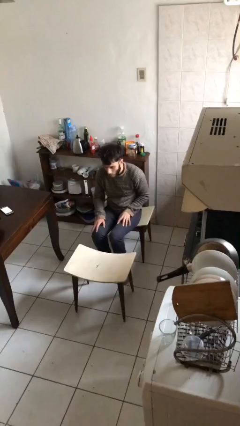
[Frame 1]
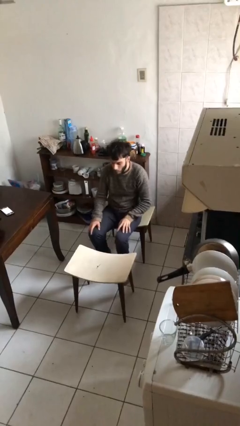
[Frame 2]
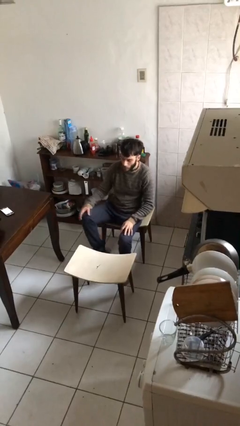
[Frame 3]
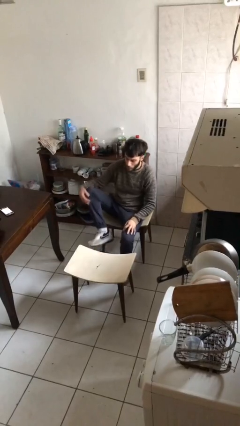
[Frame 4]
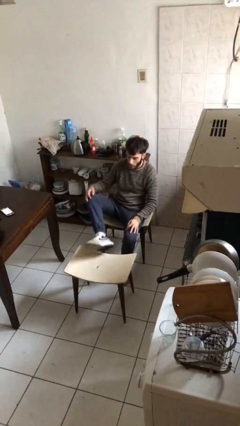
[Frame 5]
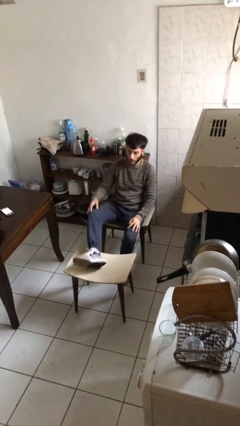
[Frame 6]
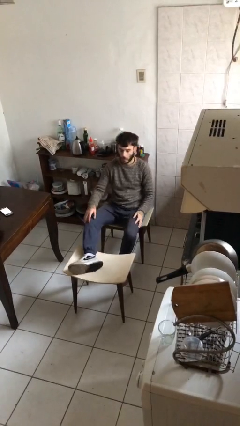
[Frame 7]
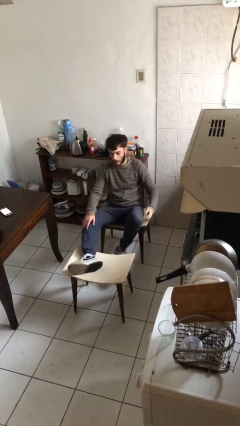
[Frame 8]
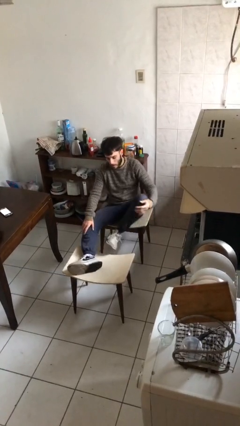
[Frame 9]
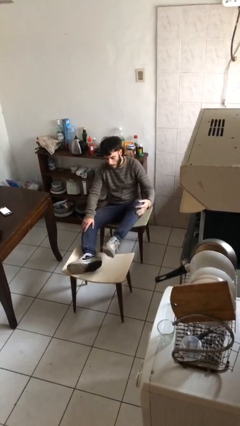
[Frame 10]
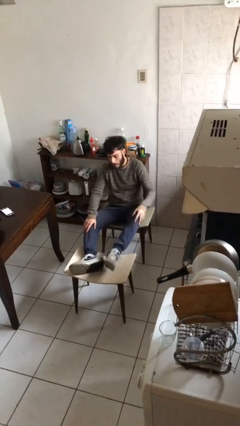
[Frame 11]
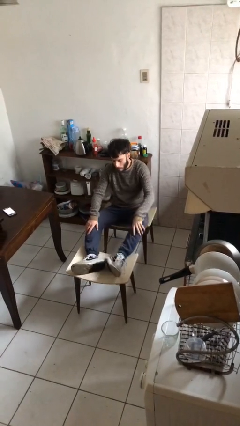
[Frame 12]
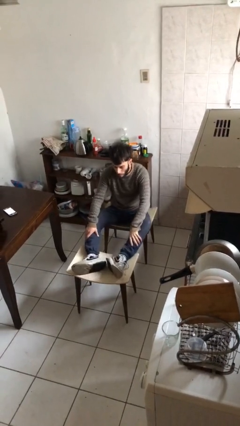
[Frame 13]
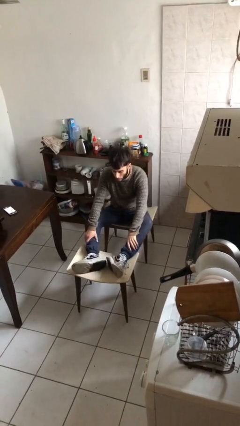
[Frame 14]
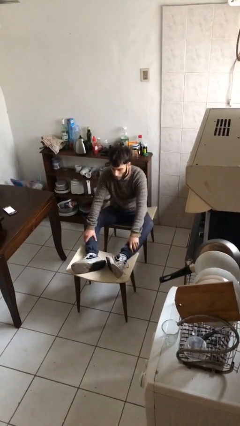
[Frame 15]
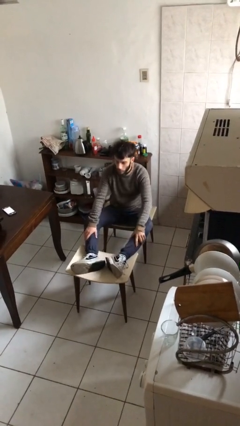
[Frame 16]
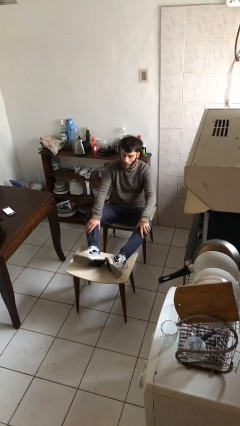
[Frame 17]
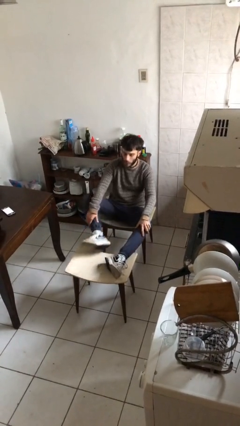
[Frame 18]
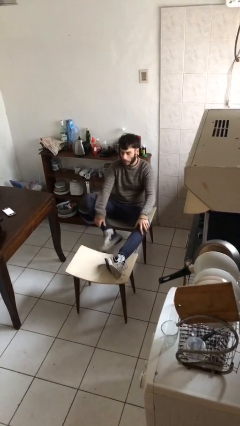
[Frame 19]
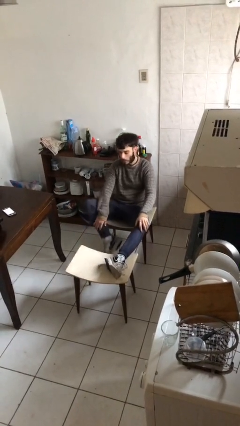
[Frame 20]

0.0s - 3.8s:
person puts feet up

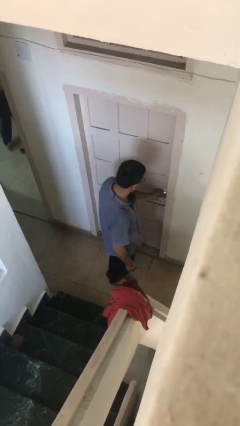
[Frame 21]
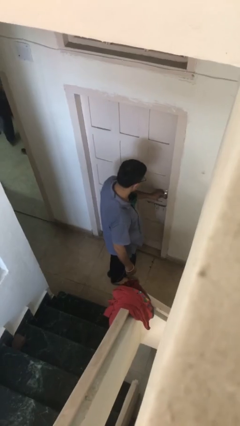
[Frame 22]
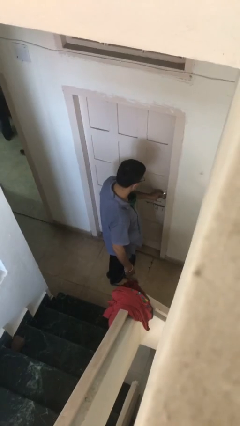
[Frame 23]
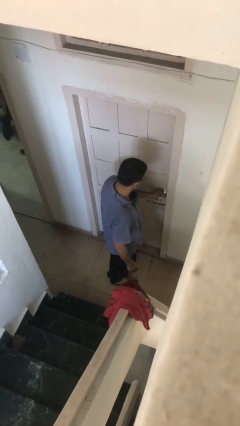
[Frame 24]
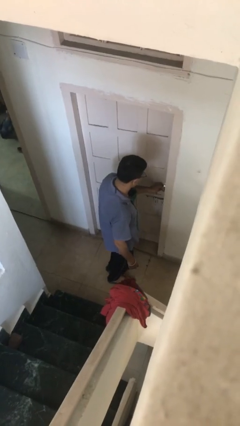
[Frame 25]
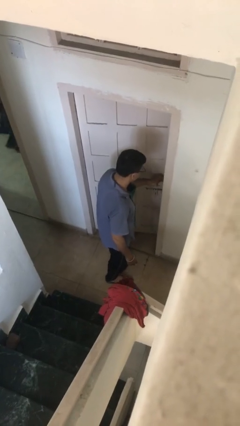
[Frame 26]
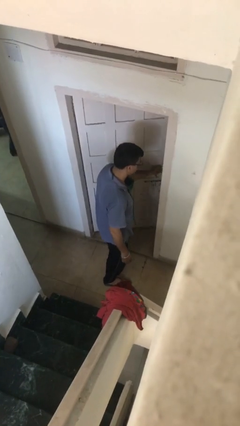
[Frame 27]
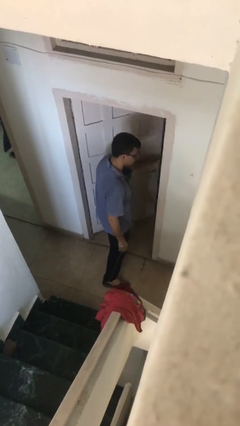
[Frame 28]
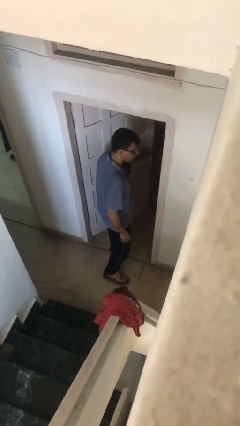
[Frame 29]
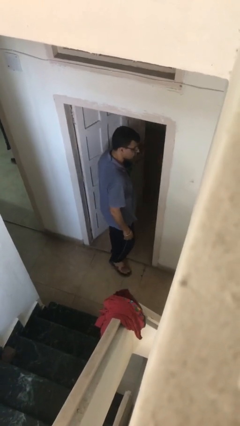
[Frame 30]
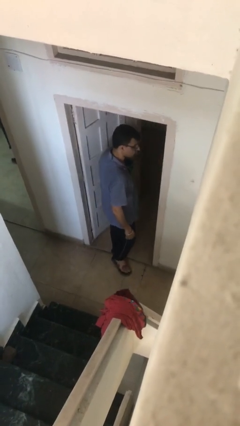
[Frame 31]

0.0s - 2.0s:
person opens facility door

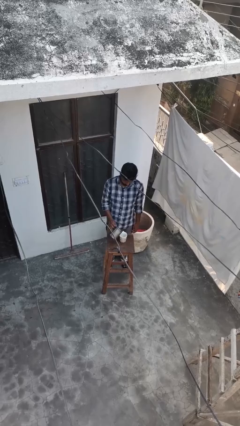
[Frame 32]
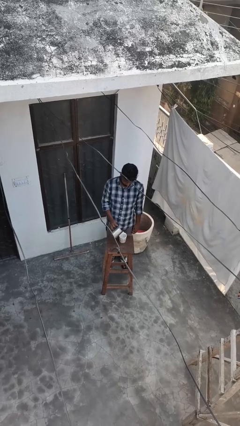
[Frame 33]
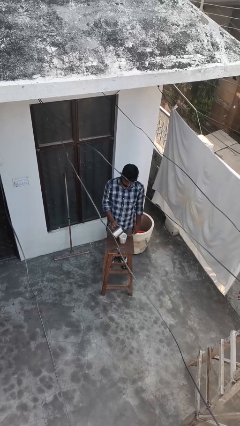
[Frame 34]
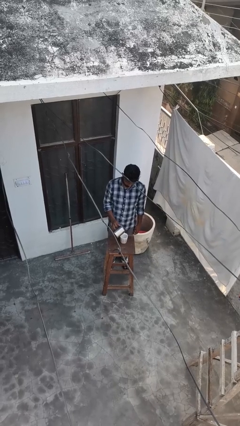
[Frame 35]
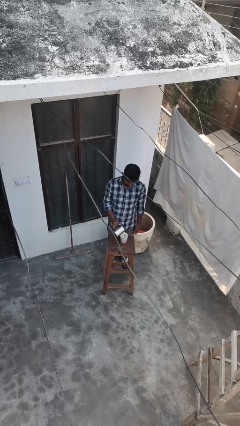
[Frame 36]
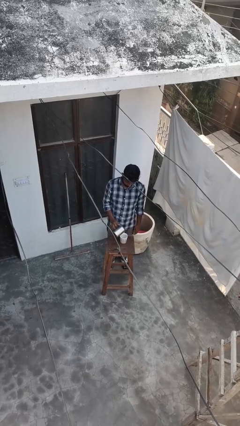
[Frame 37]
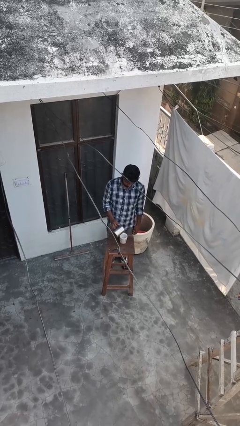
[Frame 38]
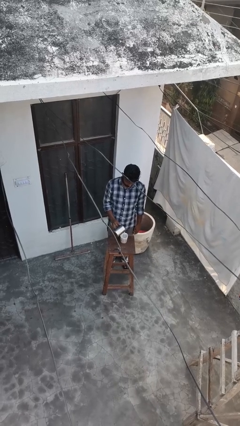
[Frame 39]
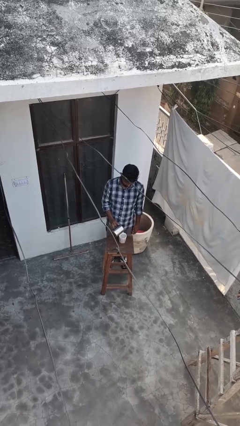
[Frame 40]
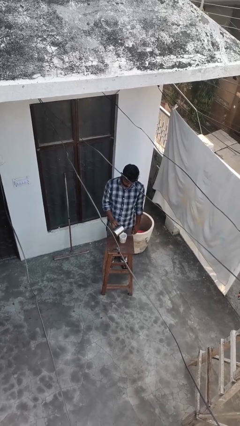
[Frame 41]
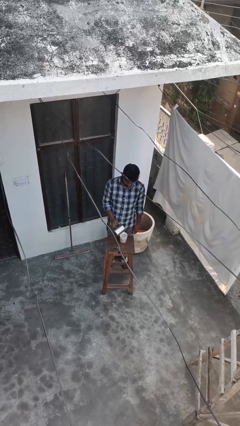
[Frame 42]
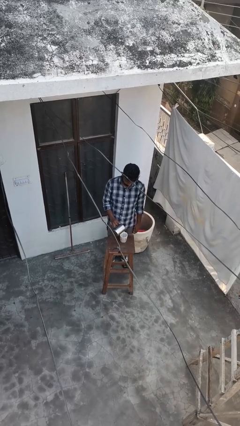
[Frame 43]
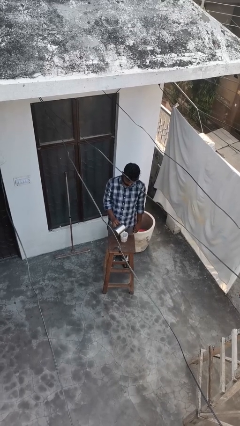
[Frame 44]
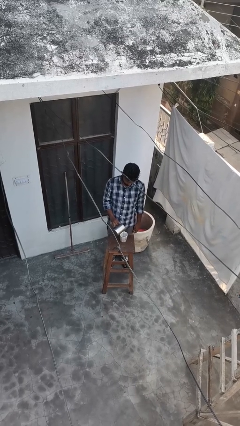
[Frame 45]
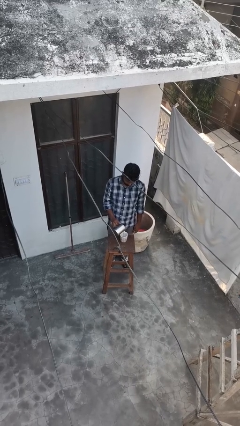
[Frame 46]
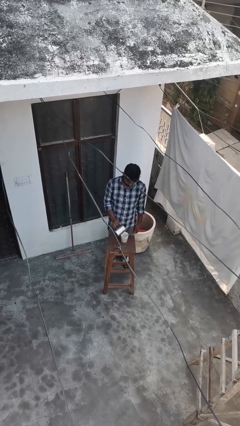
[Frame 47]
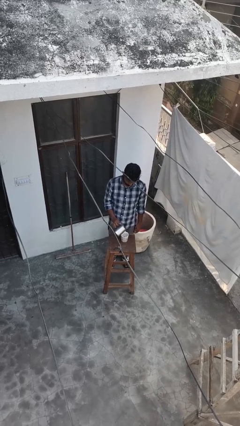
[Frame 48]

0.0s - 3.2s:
person pours coffee into mug

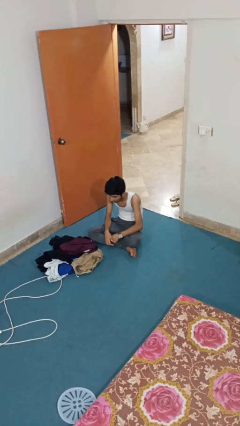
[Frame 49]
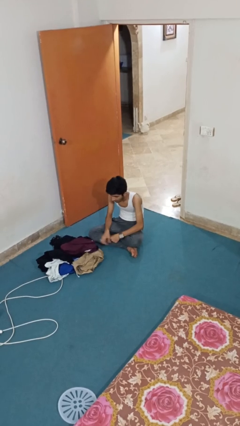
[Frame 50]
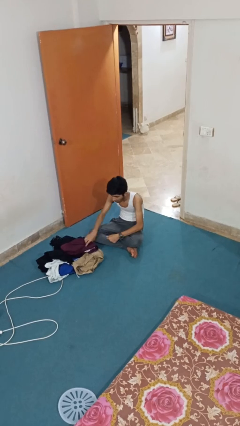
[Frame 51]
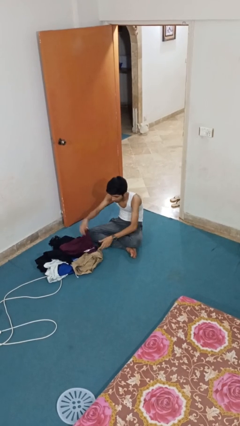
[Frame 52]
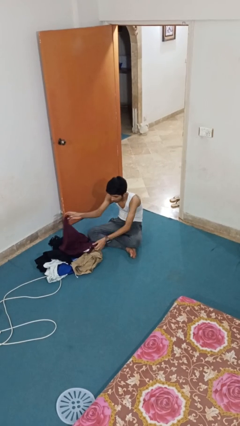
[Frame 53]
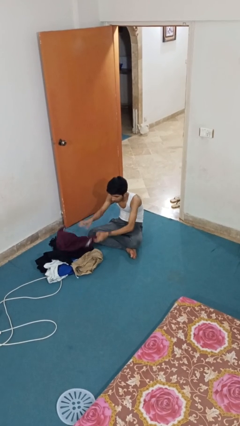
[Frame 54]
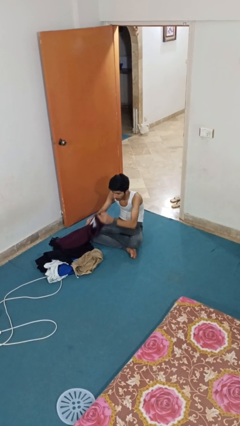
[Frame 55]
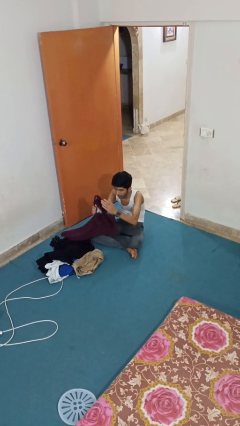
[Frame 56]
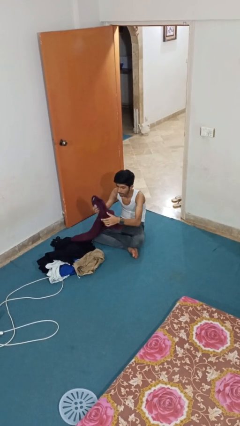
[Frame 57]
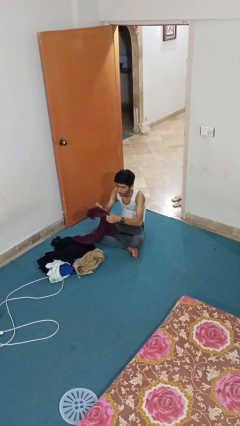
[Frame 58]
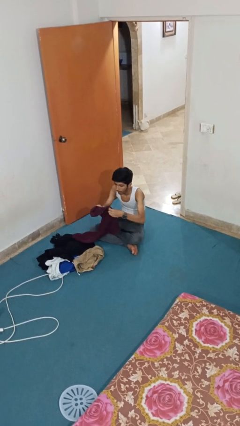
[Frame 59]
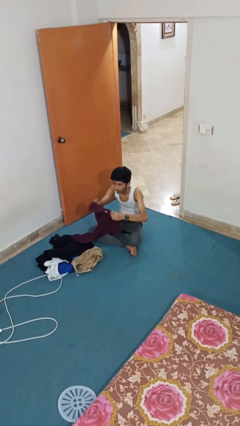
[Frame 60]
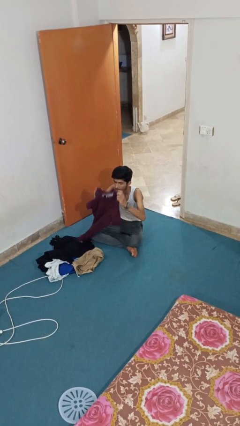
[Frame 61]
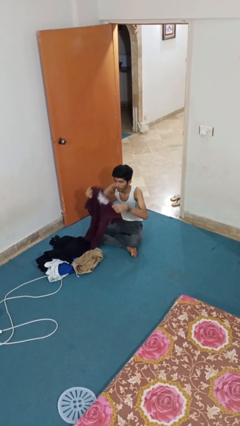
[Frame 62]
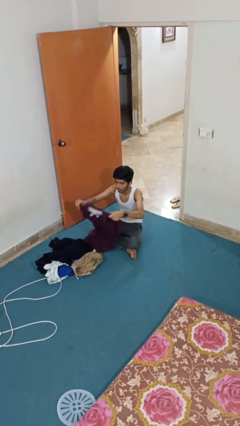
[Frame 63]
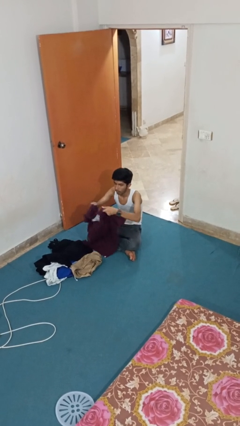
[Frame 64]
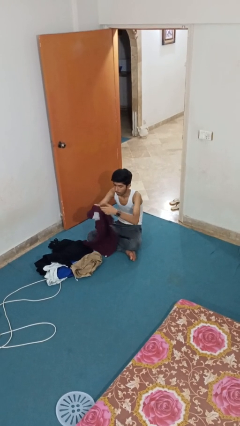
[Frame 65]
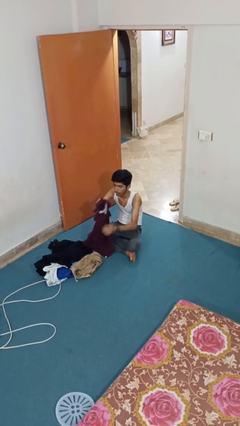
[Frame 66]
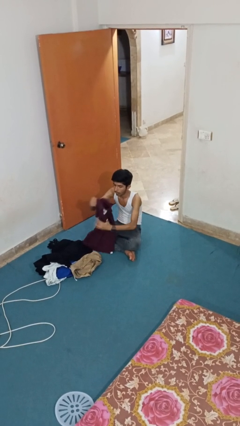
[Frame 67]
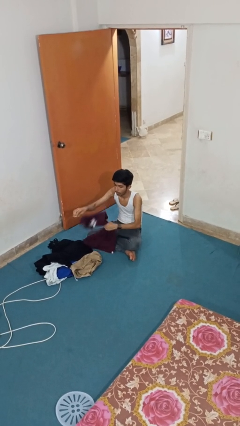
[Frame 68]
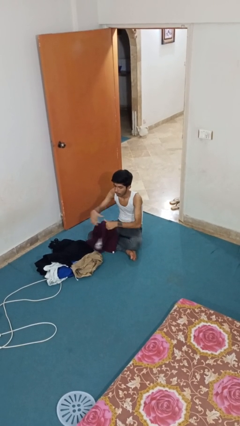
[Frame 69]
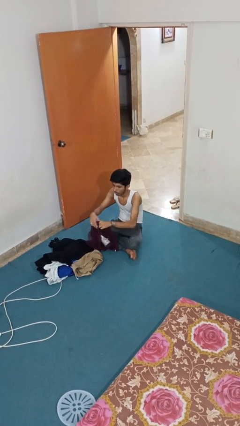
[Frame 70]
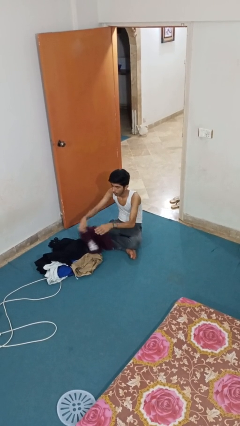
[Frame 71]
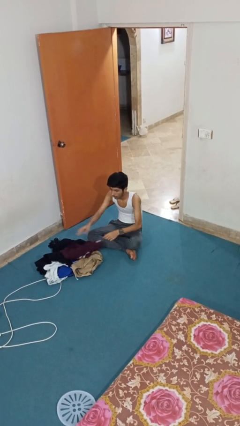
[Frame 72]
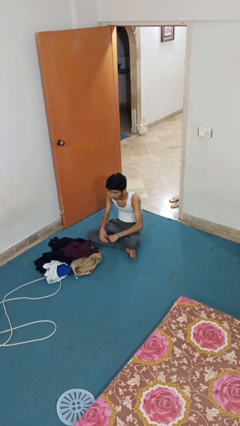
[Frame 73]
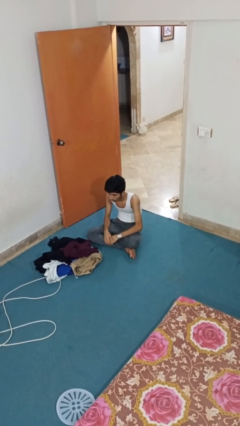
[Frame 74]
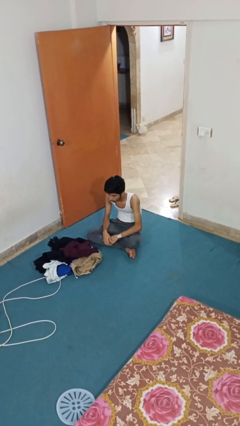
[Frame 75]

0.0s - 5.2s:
person folds shirt

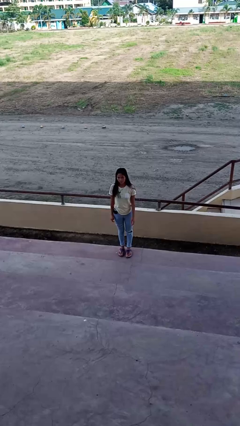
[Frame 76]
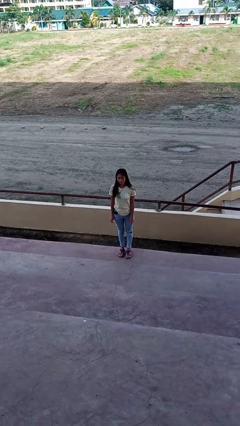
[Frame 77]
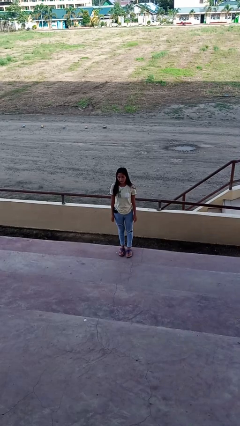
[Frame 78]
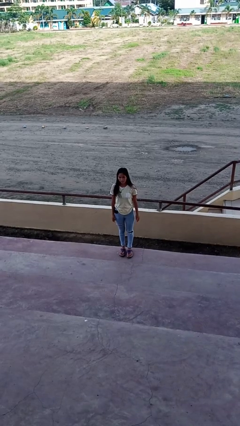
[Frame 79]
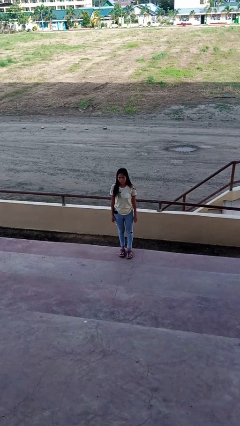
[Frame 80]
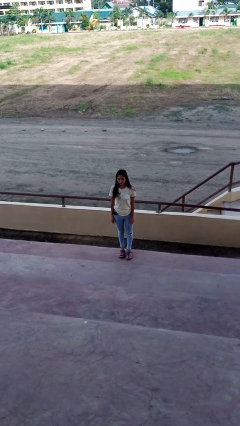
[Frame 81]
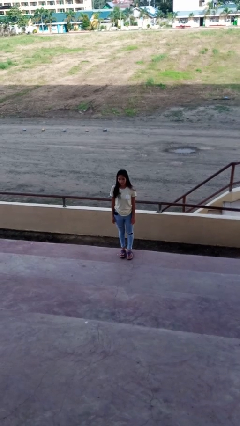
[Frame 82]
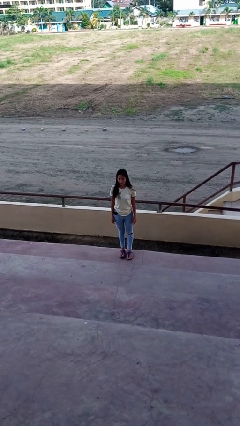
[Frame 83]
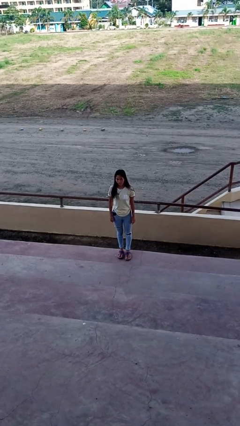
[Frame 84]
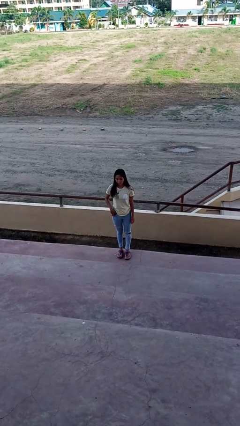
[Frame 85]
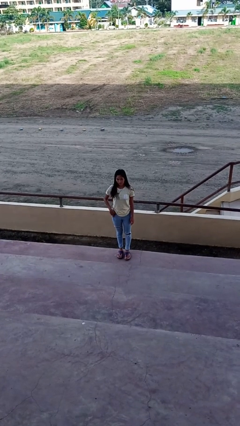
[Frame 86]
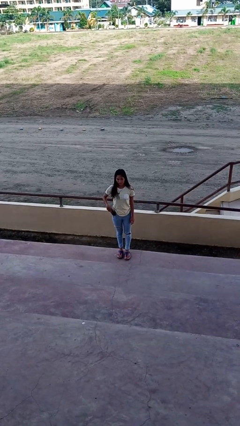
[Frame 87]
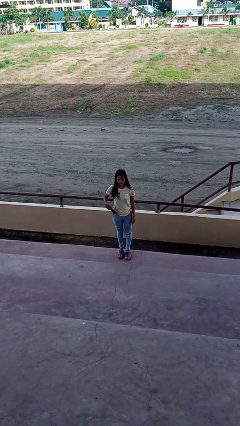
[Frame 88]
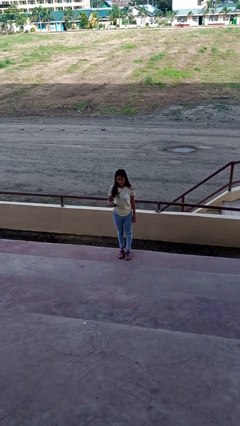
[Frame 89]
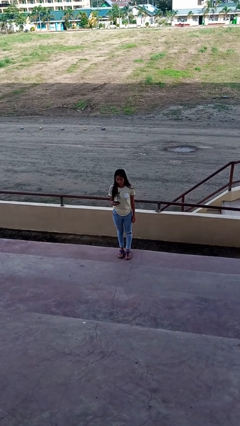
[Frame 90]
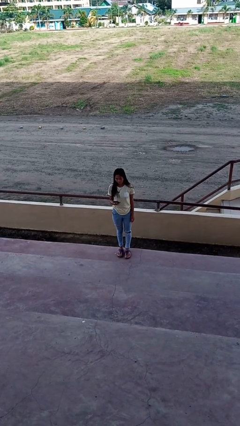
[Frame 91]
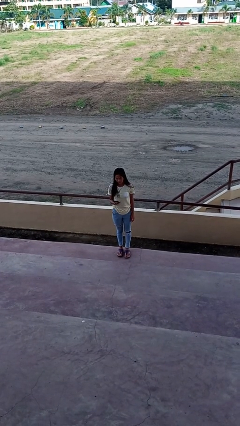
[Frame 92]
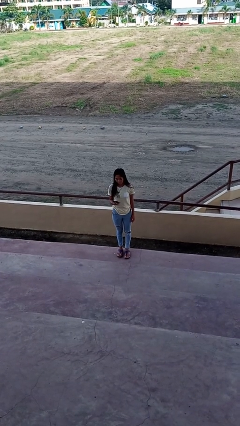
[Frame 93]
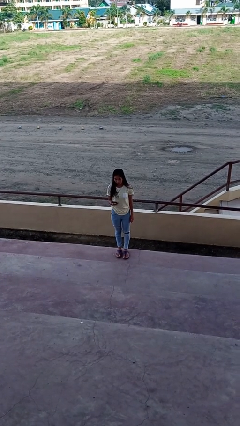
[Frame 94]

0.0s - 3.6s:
person takes phone from pocket
